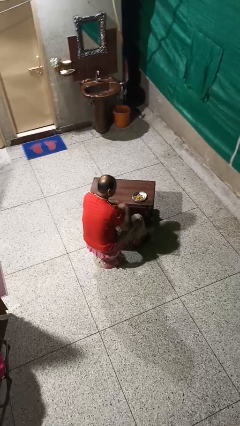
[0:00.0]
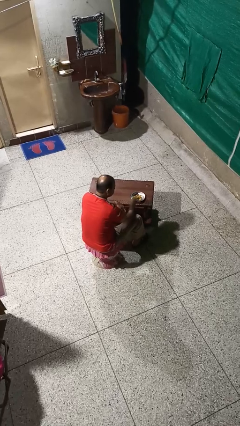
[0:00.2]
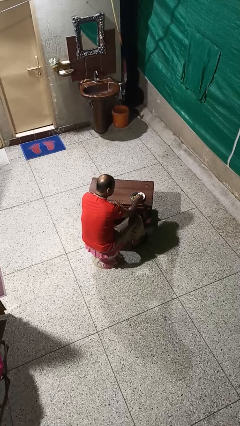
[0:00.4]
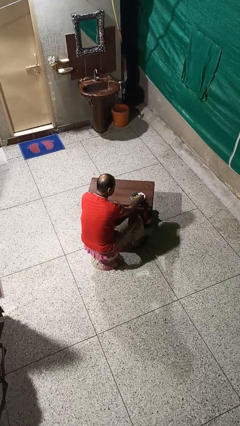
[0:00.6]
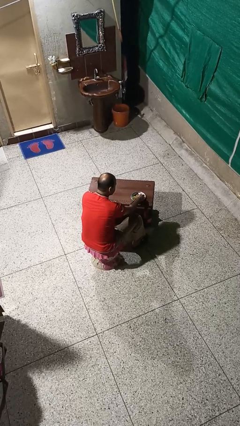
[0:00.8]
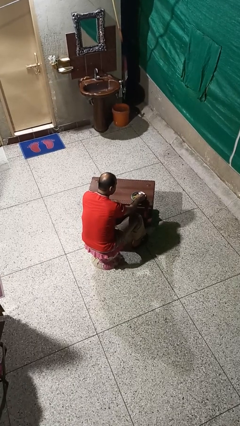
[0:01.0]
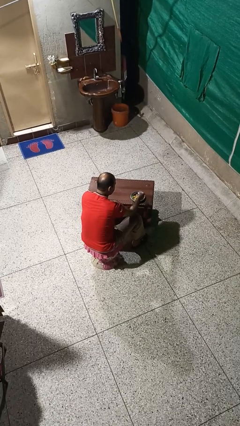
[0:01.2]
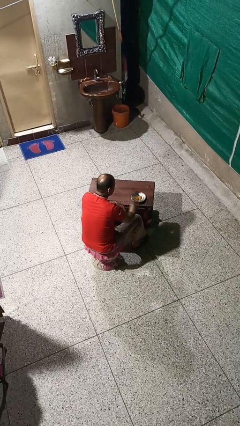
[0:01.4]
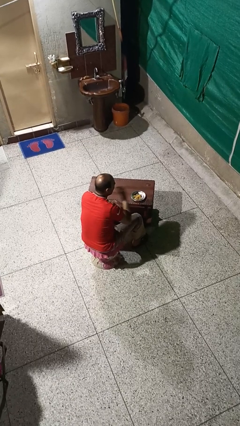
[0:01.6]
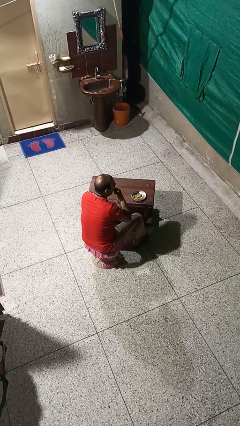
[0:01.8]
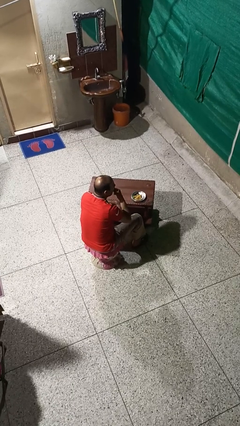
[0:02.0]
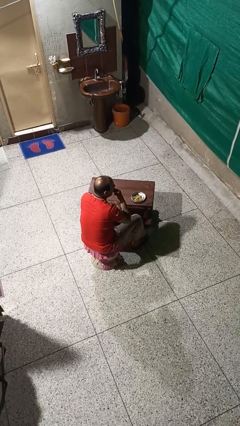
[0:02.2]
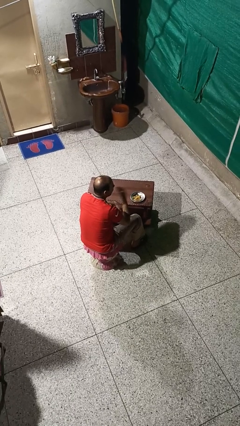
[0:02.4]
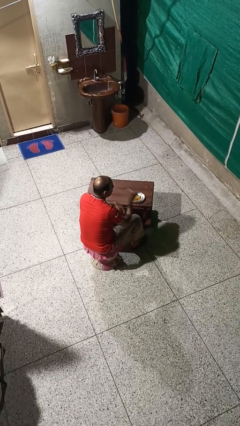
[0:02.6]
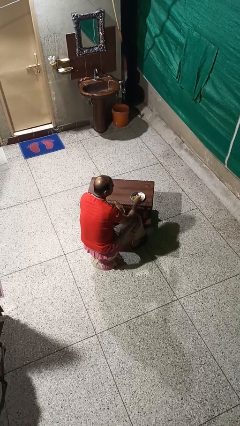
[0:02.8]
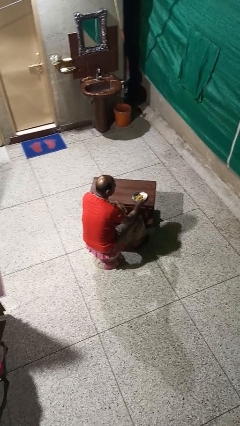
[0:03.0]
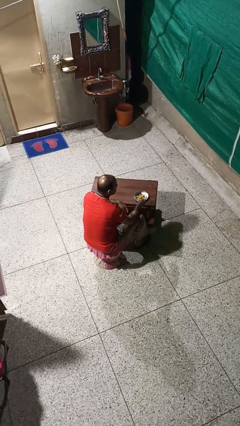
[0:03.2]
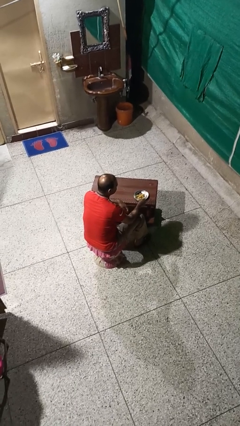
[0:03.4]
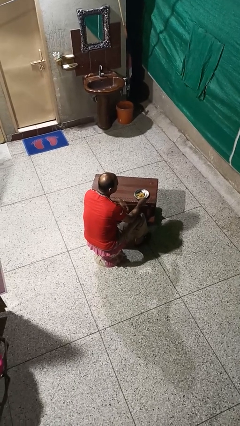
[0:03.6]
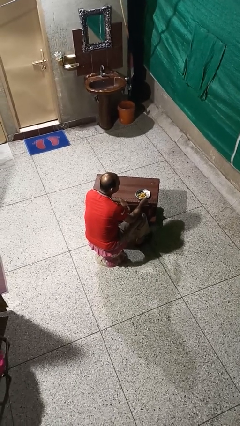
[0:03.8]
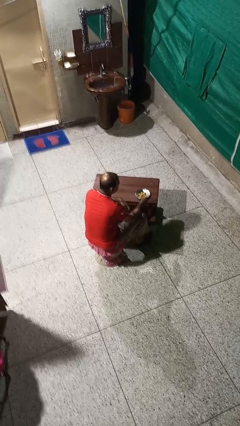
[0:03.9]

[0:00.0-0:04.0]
person eats with hands

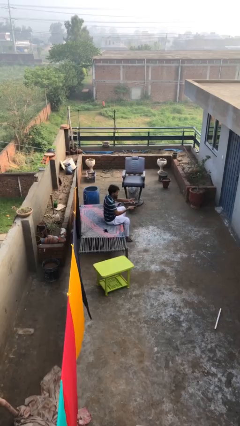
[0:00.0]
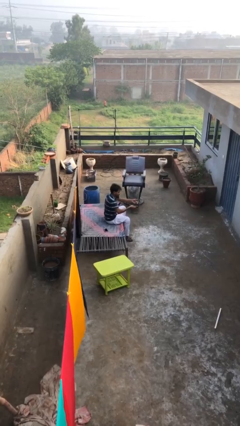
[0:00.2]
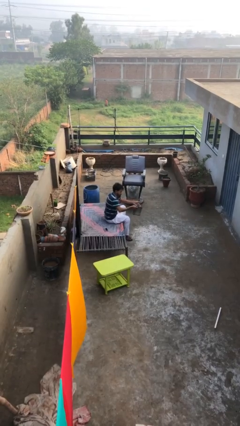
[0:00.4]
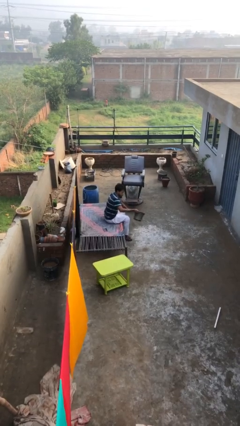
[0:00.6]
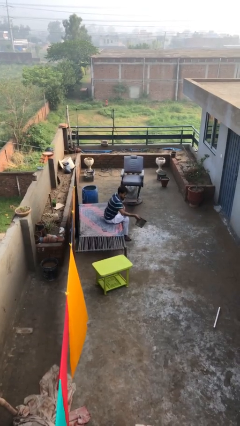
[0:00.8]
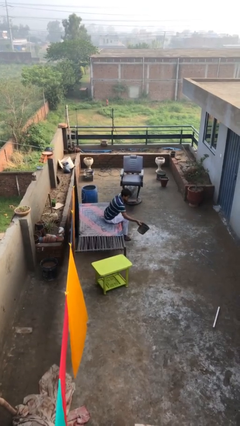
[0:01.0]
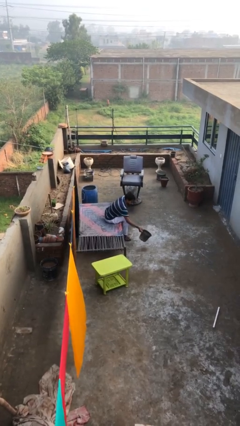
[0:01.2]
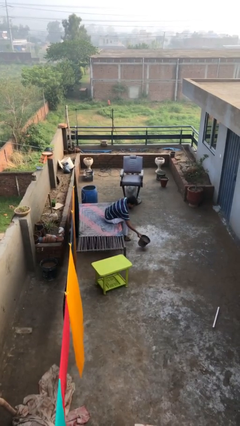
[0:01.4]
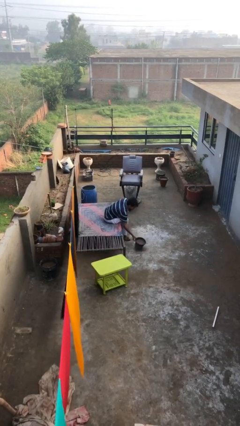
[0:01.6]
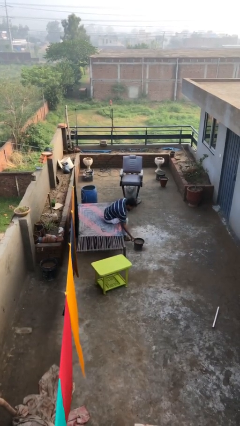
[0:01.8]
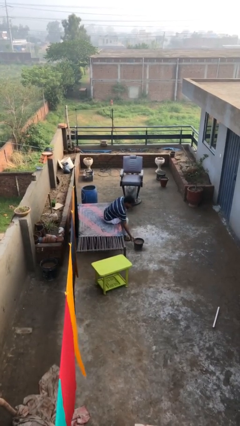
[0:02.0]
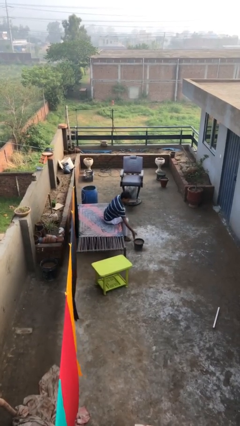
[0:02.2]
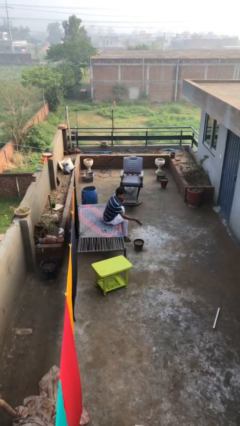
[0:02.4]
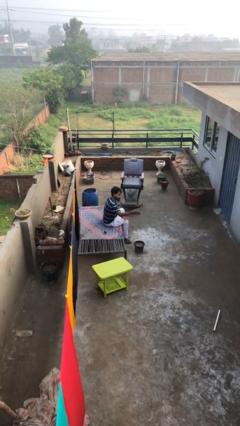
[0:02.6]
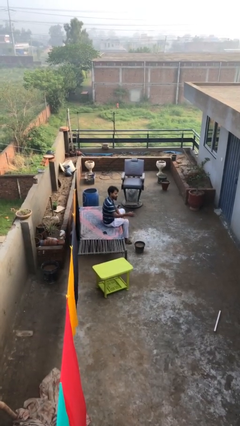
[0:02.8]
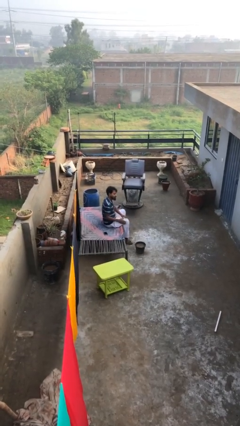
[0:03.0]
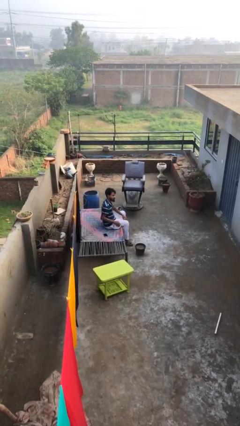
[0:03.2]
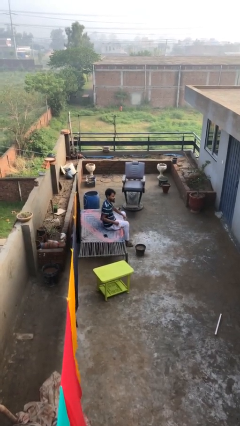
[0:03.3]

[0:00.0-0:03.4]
person puts down object on floor

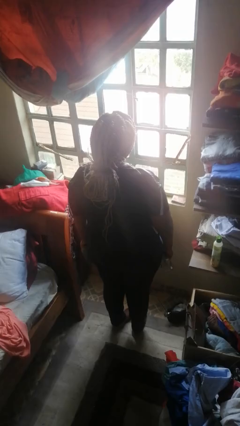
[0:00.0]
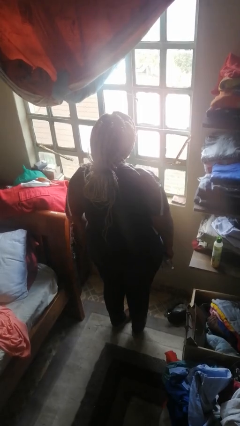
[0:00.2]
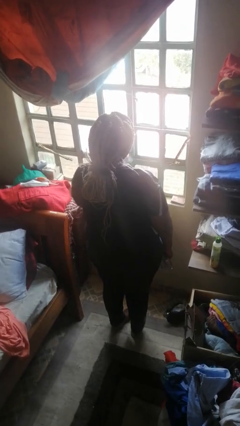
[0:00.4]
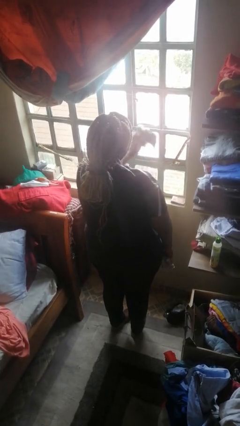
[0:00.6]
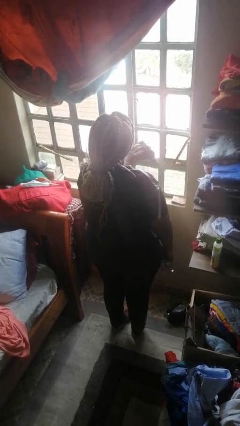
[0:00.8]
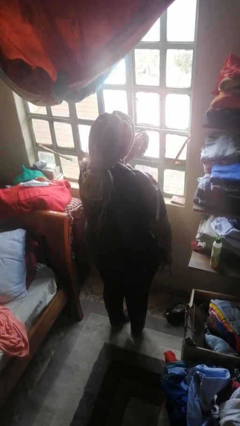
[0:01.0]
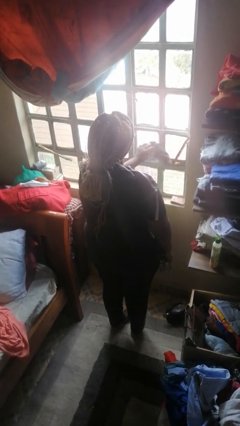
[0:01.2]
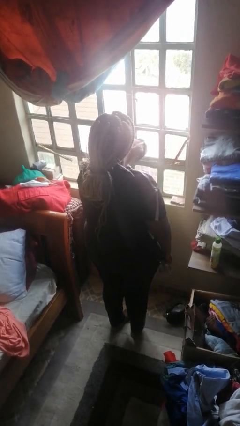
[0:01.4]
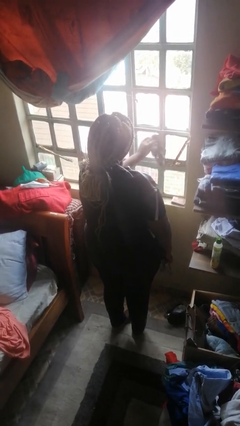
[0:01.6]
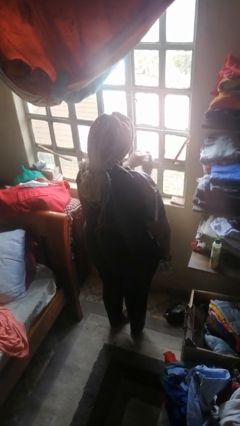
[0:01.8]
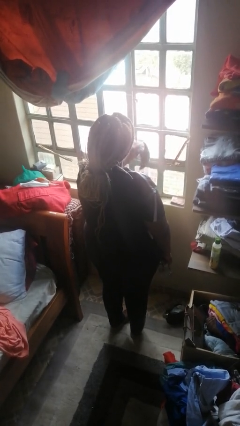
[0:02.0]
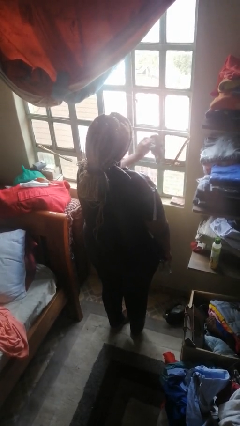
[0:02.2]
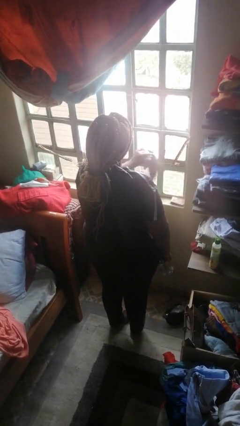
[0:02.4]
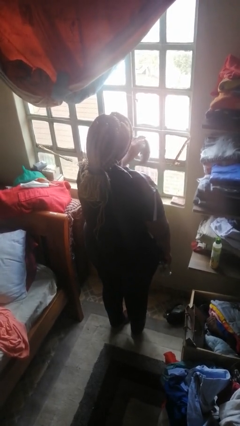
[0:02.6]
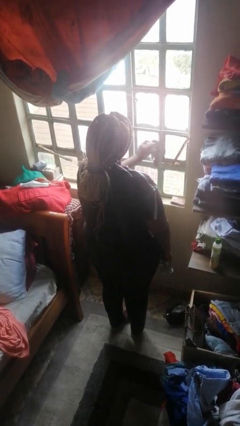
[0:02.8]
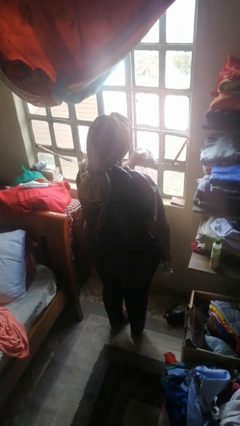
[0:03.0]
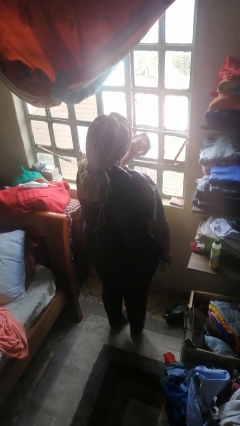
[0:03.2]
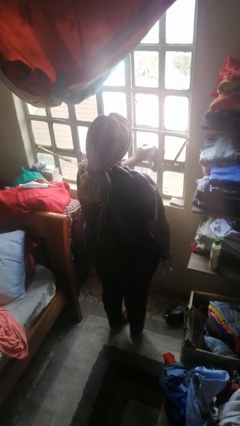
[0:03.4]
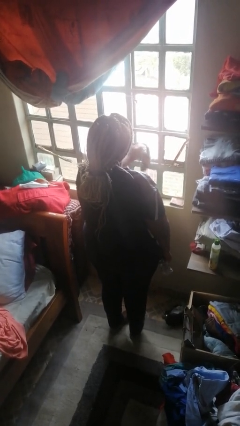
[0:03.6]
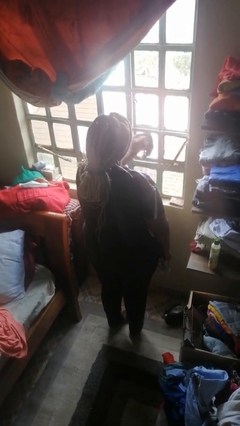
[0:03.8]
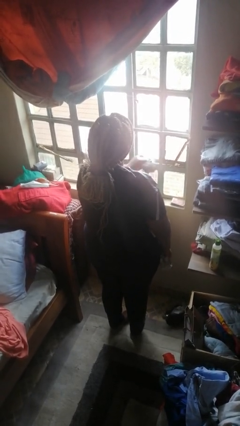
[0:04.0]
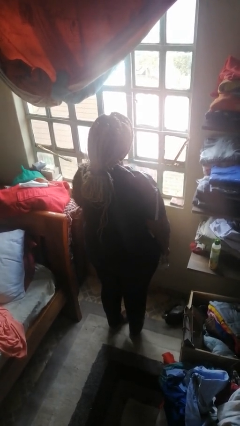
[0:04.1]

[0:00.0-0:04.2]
person washes window

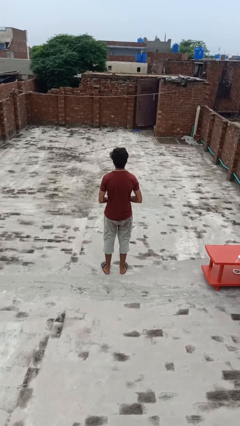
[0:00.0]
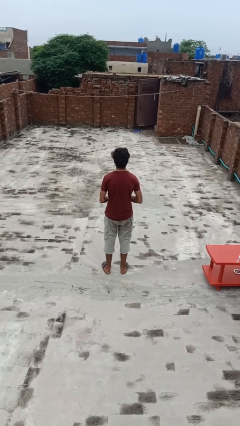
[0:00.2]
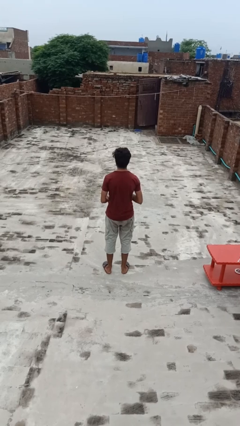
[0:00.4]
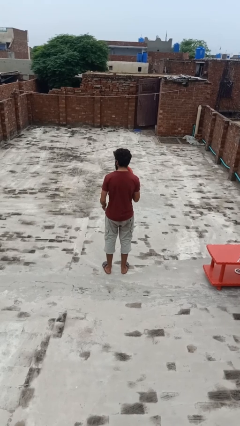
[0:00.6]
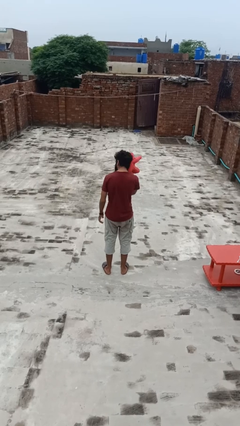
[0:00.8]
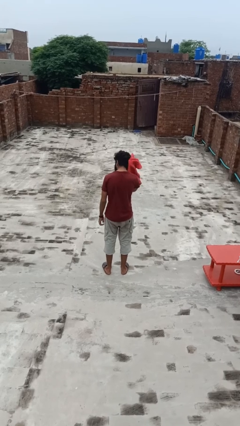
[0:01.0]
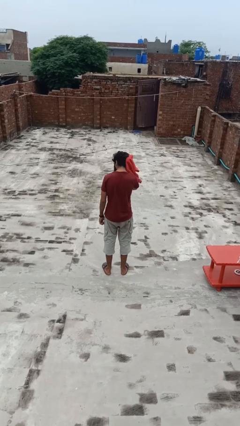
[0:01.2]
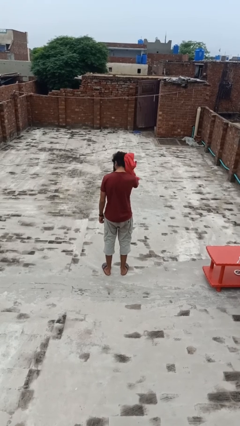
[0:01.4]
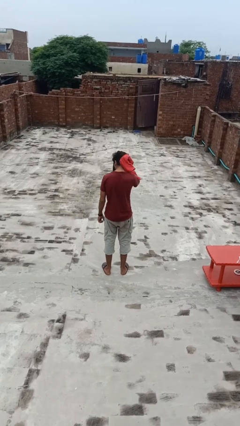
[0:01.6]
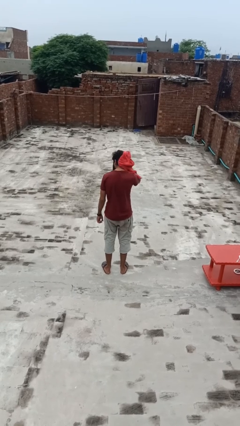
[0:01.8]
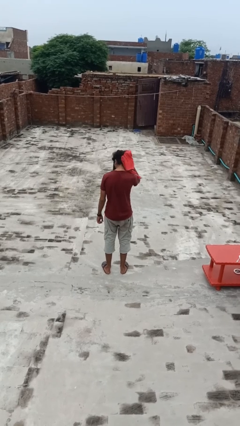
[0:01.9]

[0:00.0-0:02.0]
person dries hair with towel

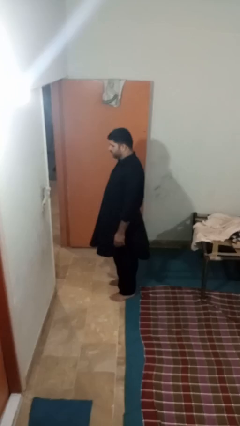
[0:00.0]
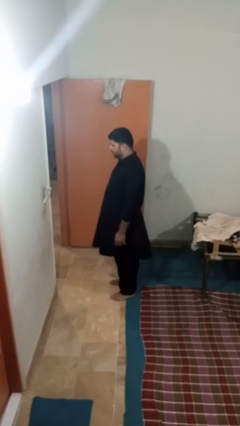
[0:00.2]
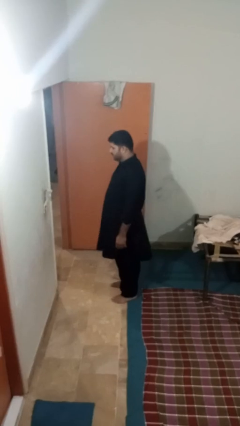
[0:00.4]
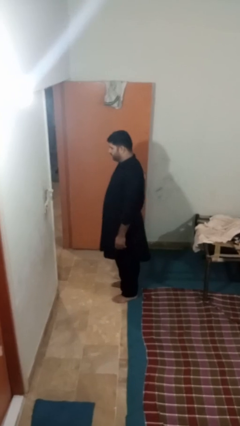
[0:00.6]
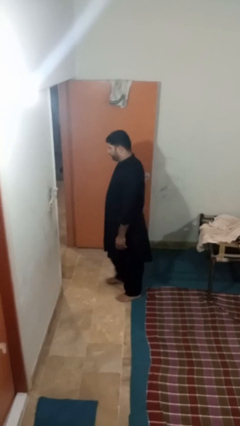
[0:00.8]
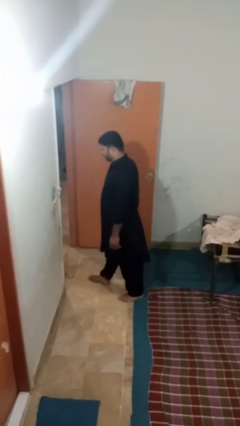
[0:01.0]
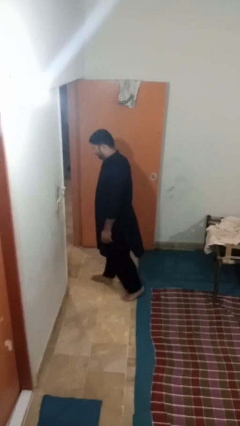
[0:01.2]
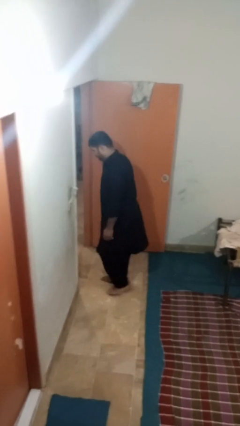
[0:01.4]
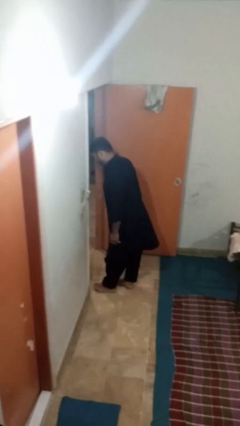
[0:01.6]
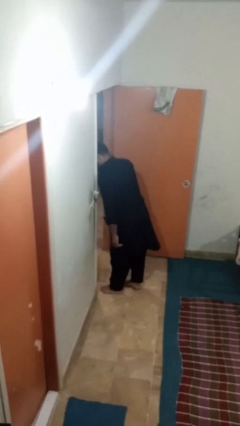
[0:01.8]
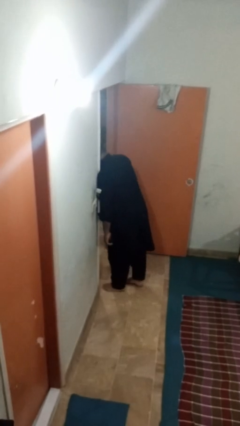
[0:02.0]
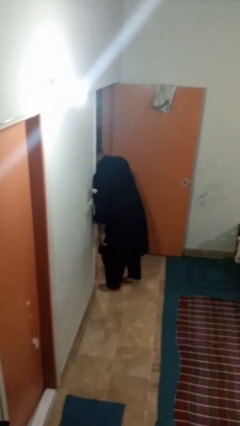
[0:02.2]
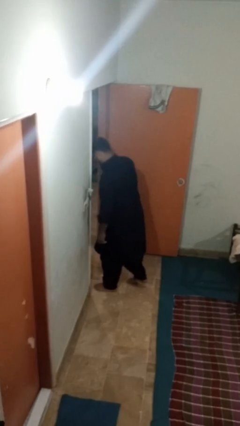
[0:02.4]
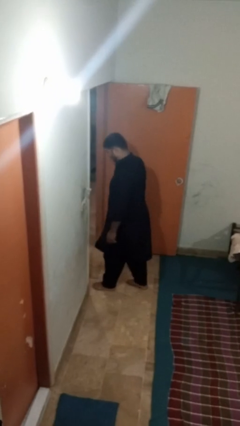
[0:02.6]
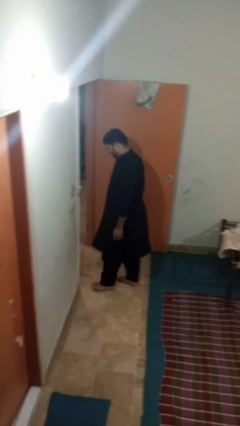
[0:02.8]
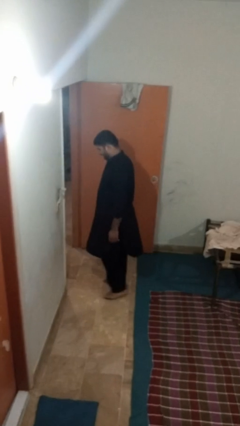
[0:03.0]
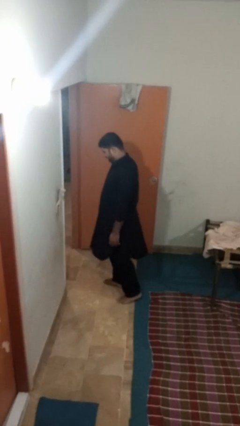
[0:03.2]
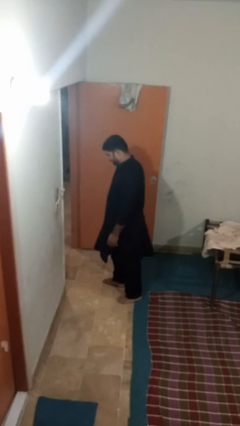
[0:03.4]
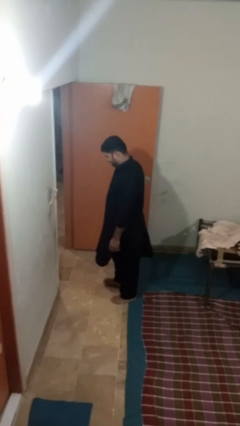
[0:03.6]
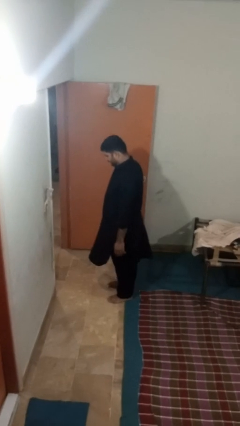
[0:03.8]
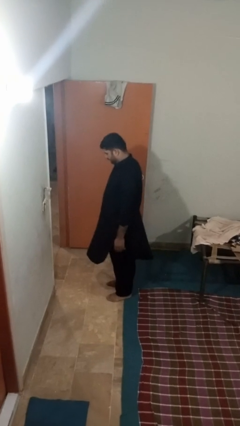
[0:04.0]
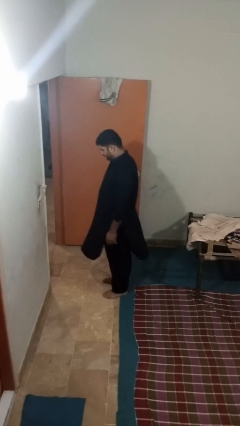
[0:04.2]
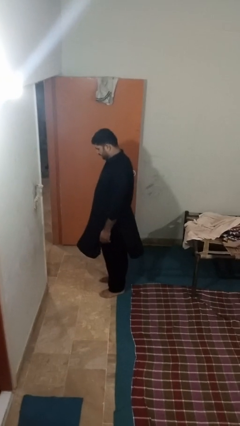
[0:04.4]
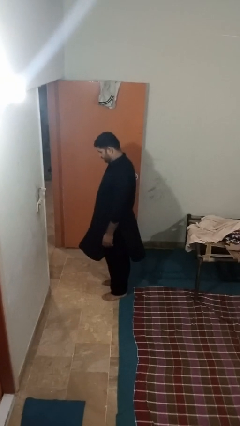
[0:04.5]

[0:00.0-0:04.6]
person bumps into wall
